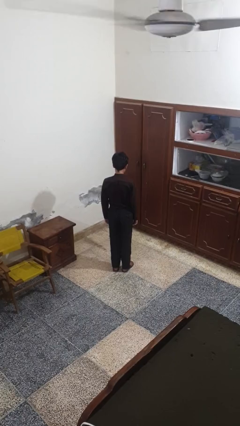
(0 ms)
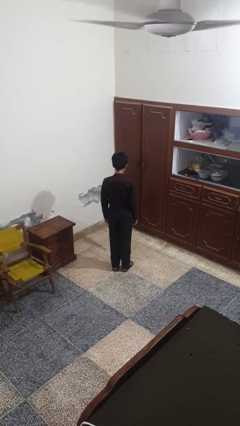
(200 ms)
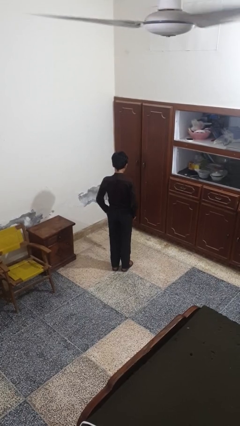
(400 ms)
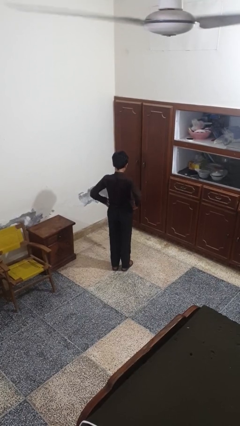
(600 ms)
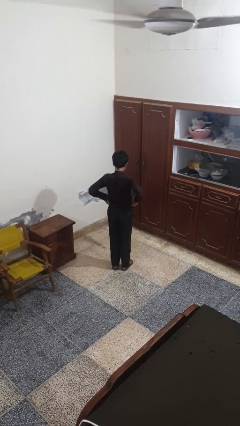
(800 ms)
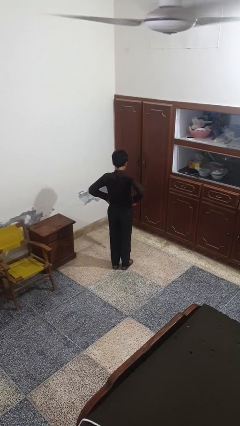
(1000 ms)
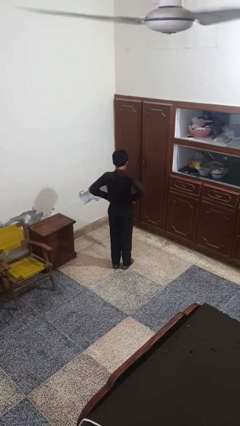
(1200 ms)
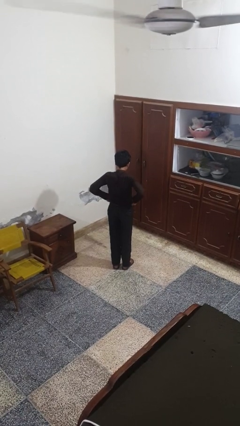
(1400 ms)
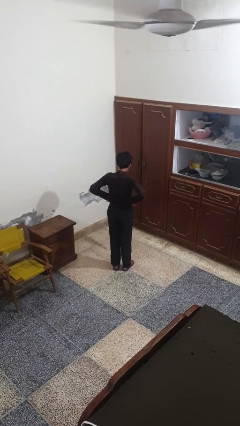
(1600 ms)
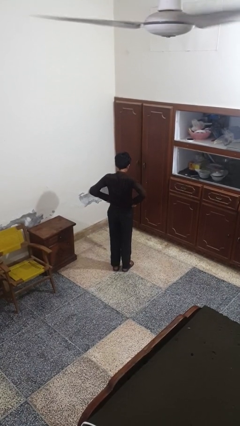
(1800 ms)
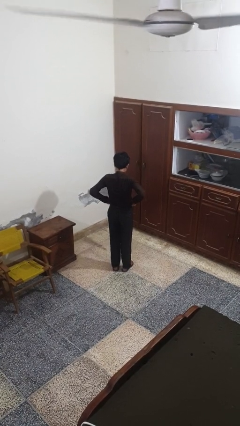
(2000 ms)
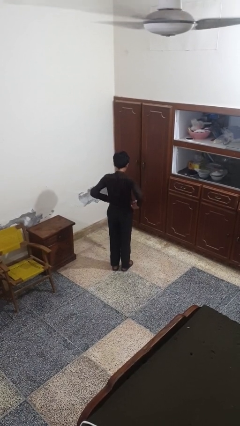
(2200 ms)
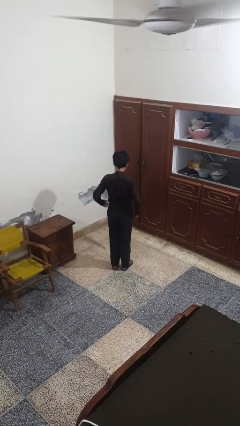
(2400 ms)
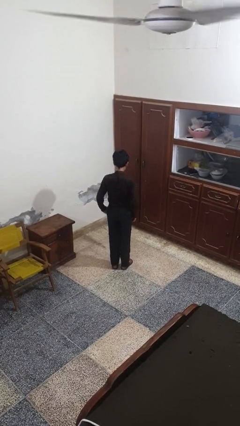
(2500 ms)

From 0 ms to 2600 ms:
person hikes up pants

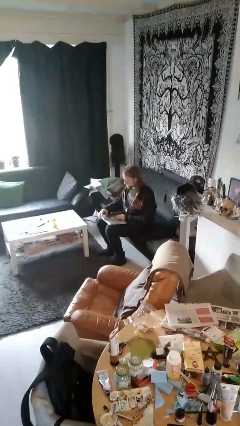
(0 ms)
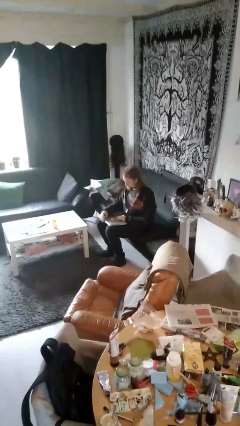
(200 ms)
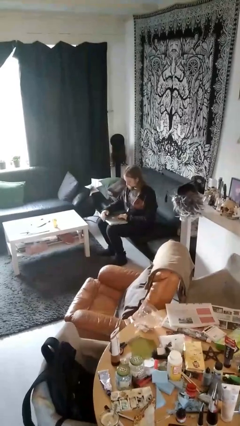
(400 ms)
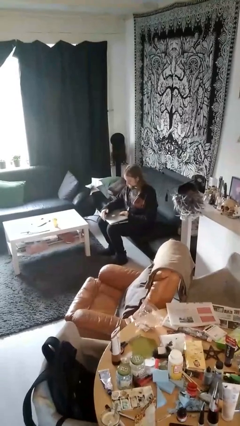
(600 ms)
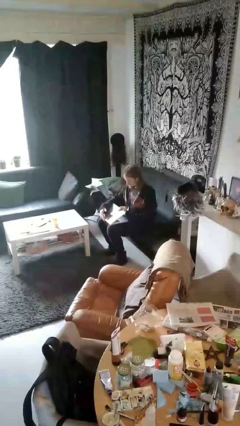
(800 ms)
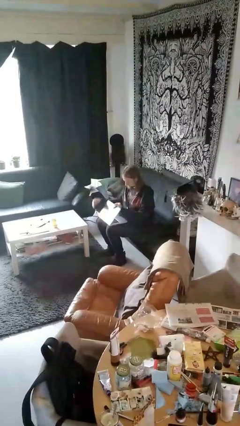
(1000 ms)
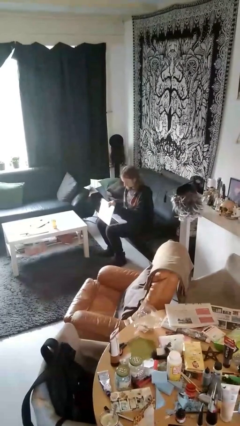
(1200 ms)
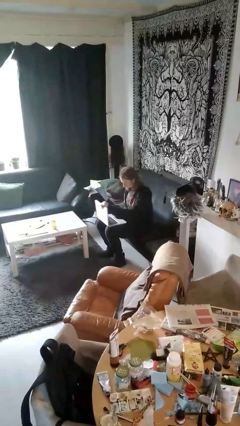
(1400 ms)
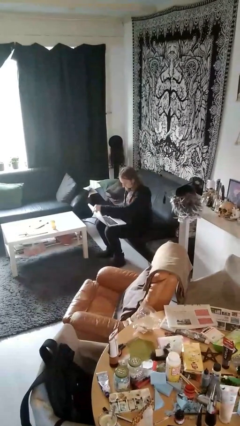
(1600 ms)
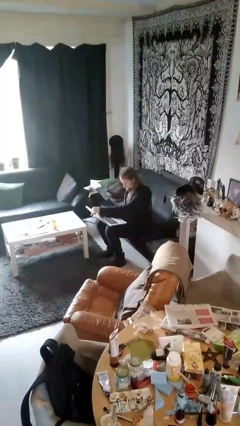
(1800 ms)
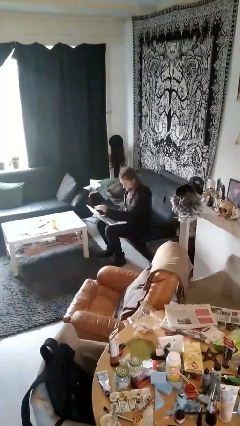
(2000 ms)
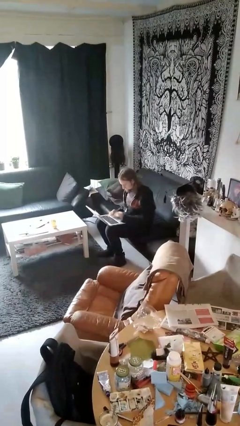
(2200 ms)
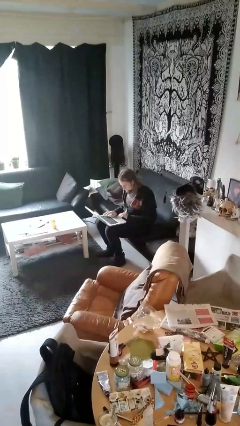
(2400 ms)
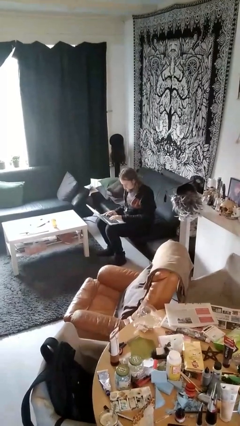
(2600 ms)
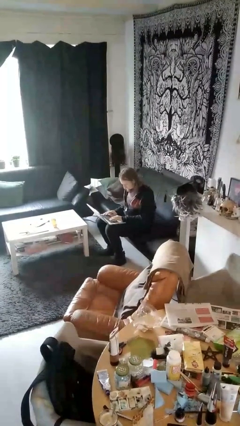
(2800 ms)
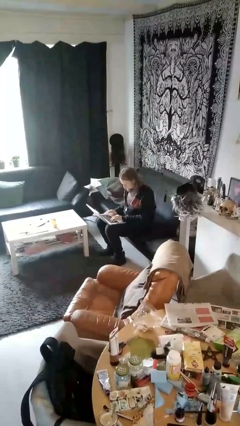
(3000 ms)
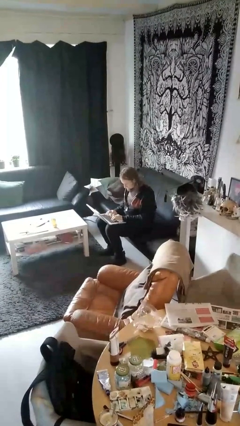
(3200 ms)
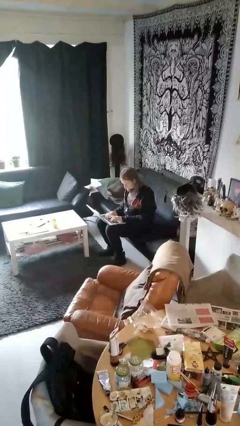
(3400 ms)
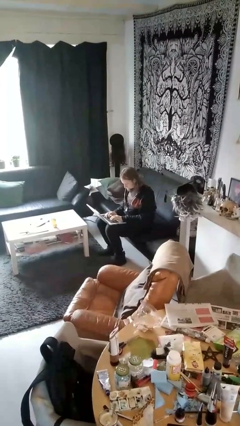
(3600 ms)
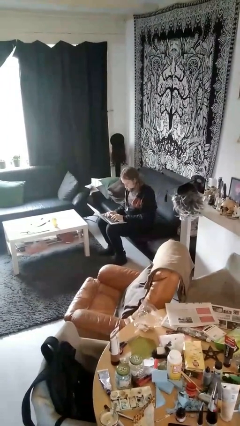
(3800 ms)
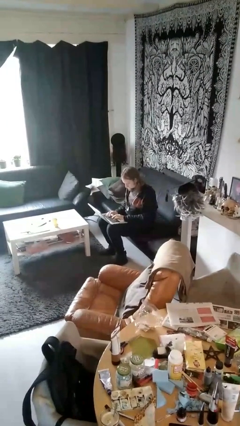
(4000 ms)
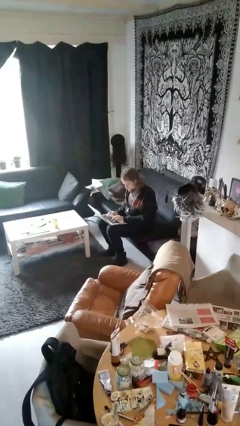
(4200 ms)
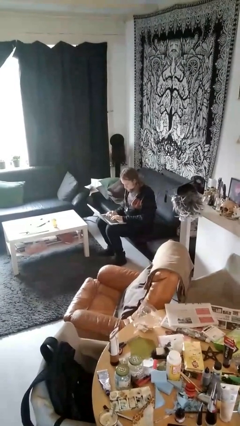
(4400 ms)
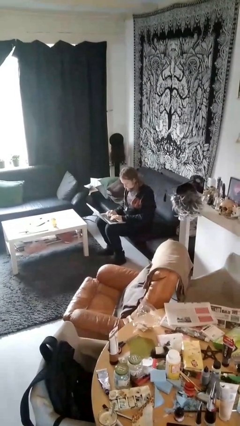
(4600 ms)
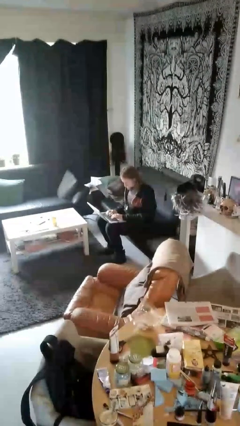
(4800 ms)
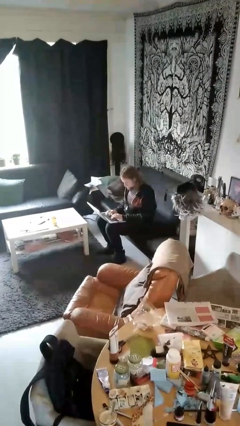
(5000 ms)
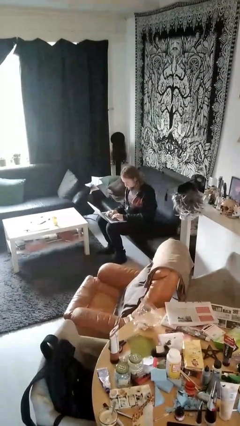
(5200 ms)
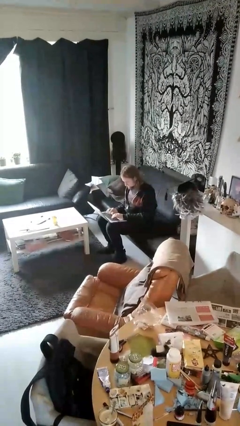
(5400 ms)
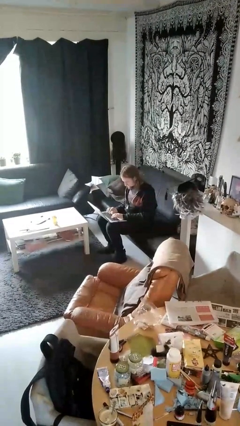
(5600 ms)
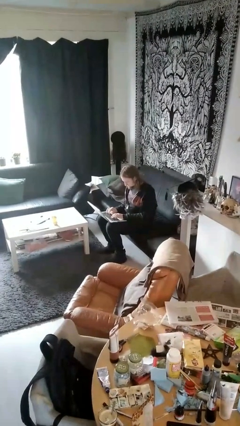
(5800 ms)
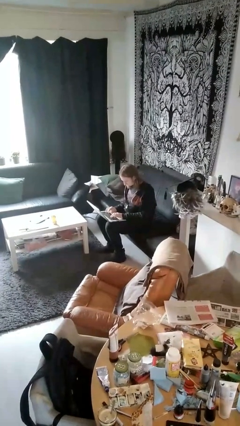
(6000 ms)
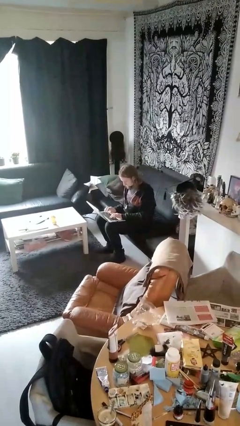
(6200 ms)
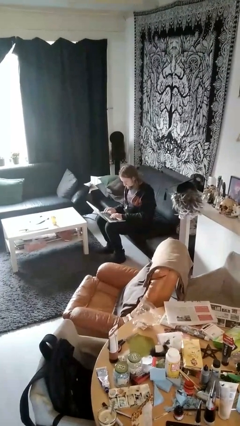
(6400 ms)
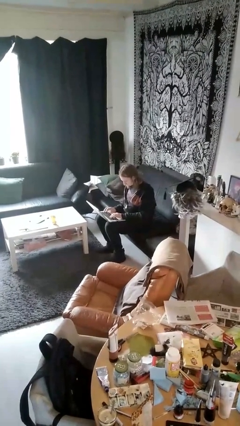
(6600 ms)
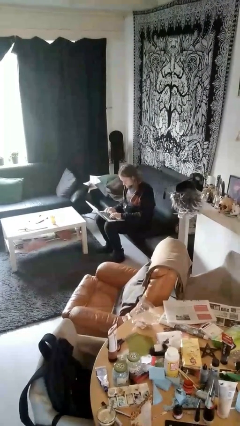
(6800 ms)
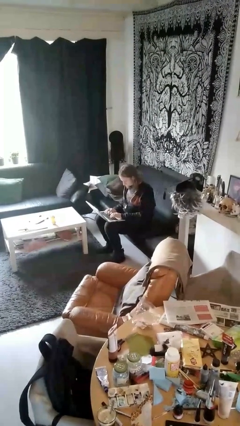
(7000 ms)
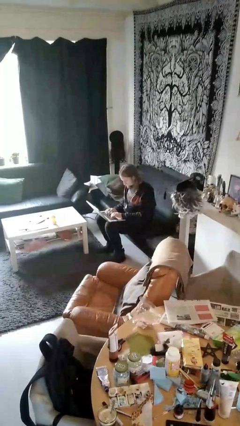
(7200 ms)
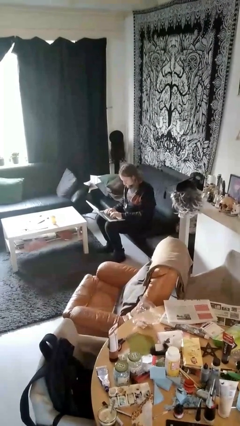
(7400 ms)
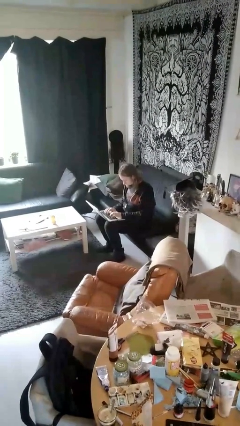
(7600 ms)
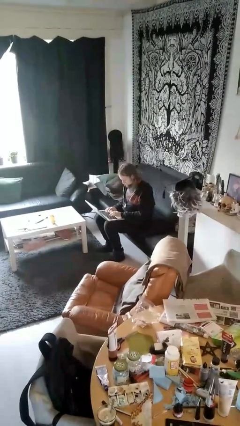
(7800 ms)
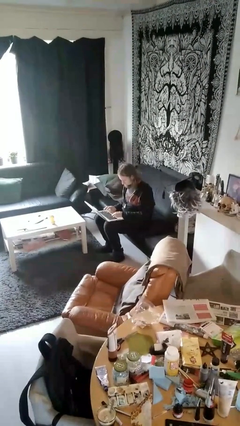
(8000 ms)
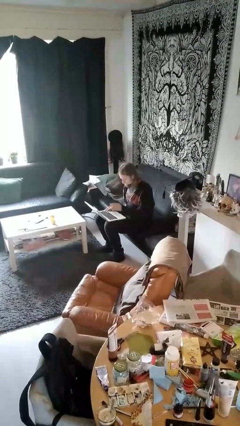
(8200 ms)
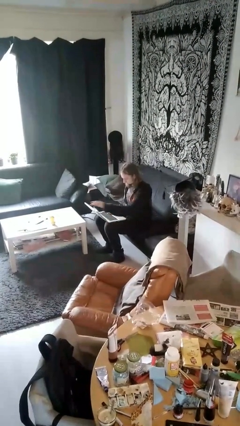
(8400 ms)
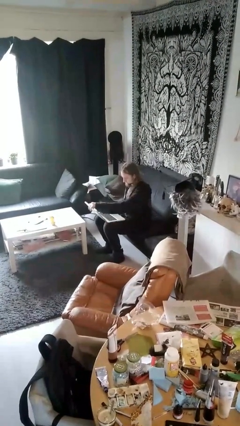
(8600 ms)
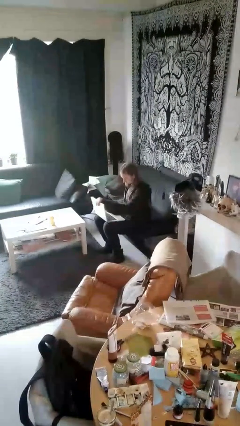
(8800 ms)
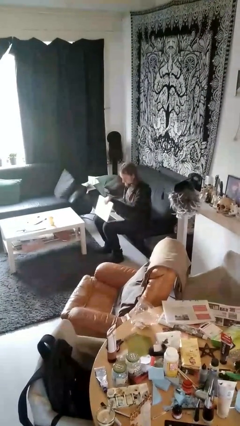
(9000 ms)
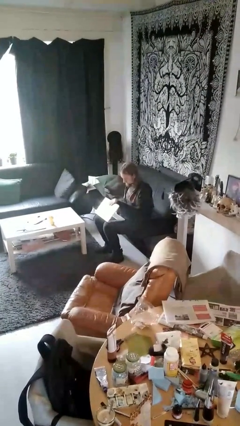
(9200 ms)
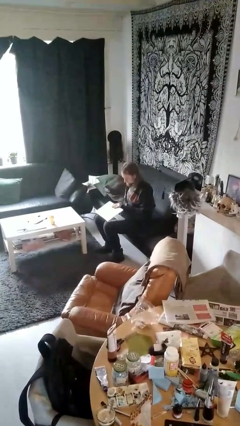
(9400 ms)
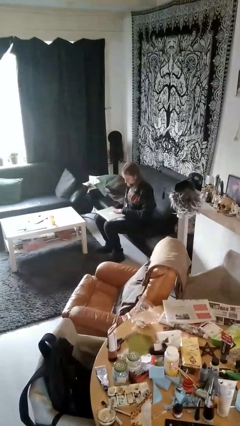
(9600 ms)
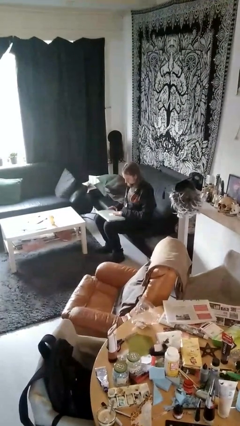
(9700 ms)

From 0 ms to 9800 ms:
person interacts with laptop

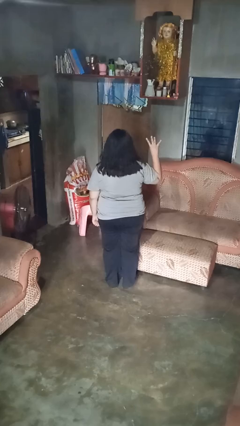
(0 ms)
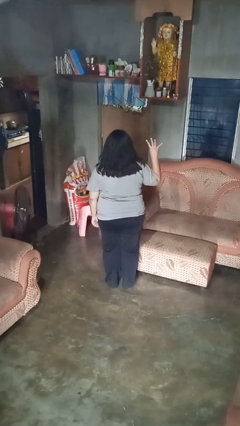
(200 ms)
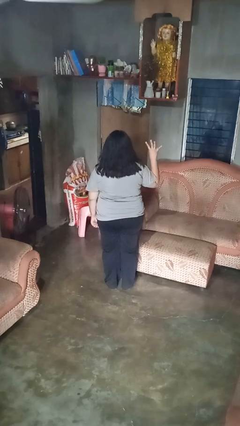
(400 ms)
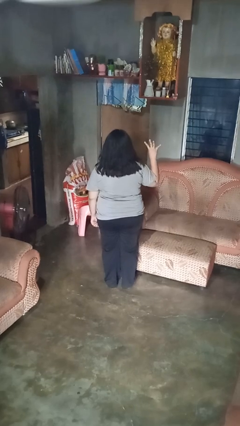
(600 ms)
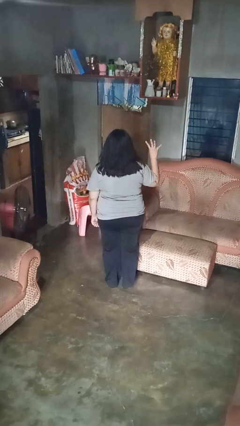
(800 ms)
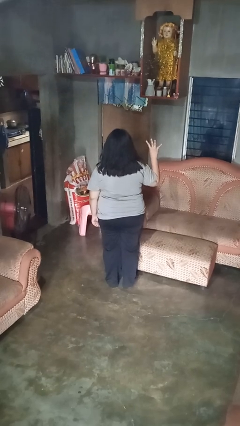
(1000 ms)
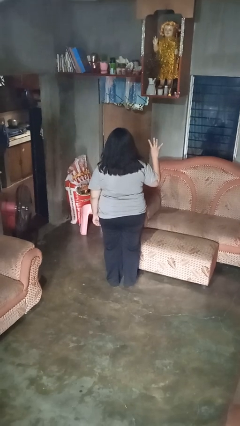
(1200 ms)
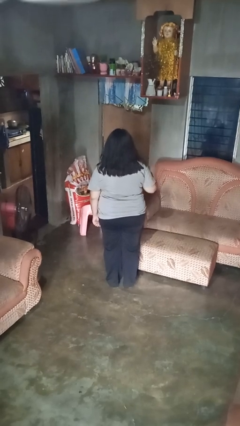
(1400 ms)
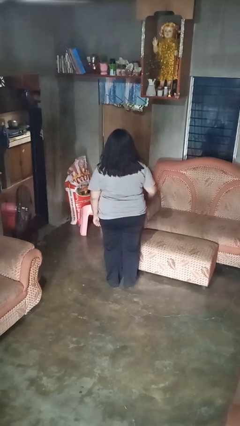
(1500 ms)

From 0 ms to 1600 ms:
person gestures number four

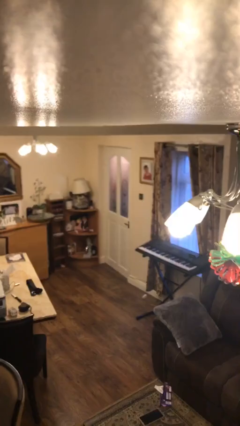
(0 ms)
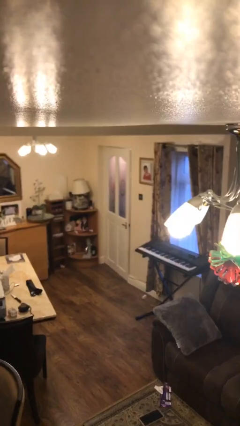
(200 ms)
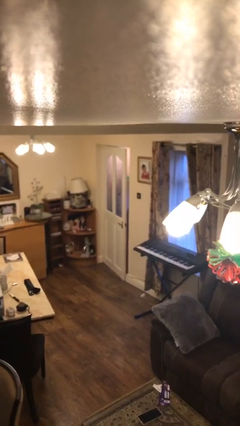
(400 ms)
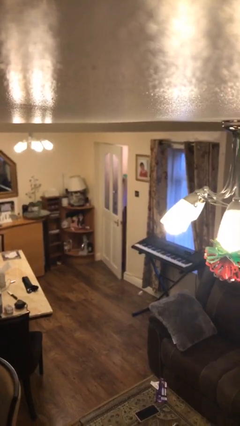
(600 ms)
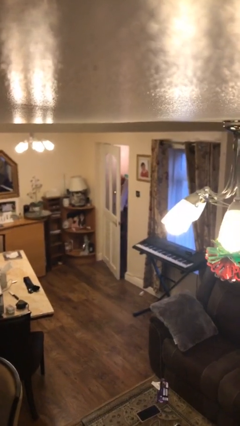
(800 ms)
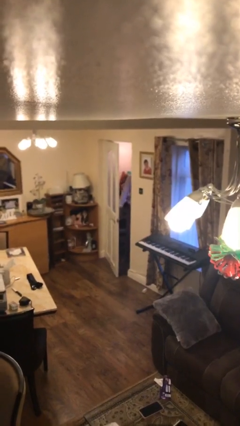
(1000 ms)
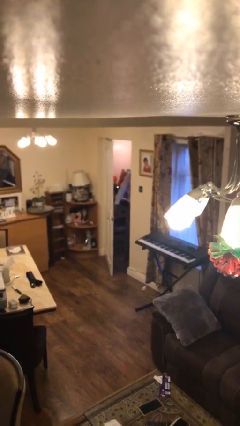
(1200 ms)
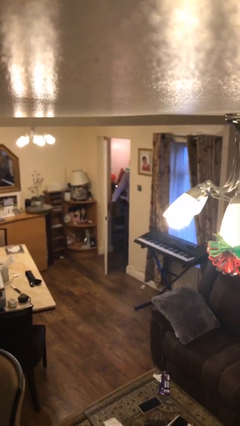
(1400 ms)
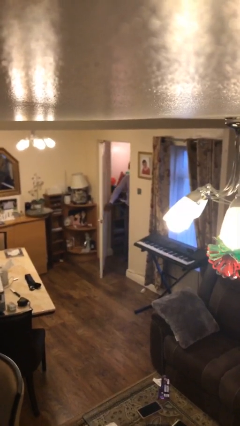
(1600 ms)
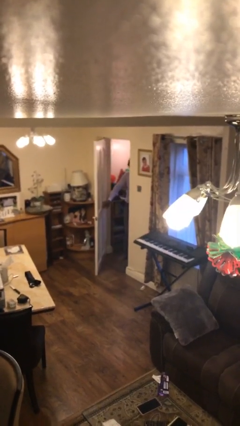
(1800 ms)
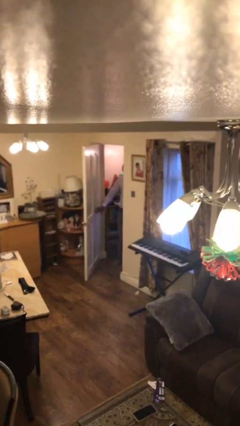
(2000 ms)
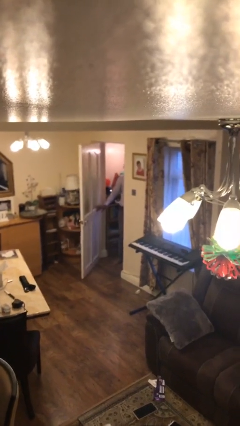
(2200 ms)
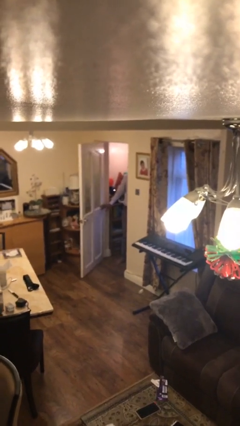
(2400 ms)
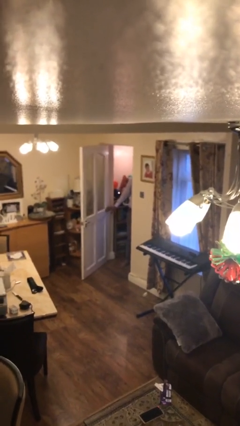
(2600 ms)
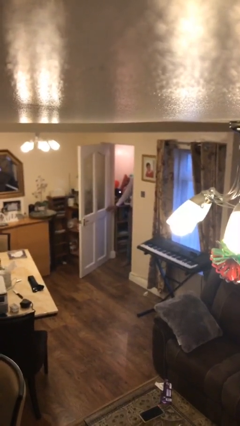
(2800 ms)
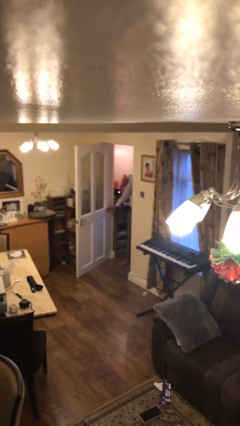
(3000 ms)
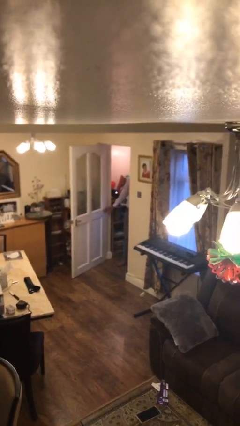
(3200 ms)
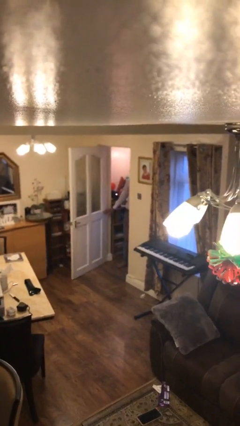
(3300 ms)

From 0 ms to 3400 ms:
person opens facility door

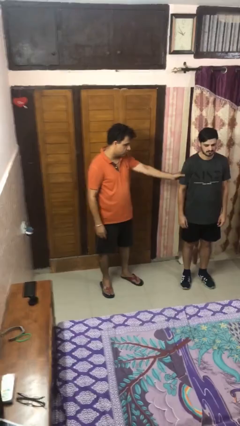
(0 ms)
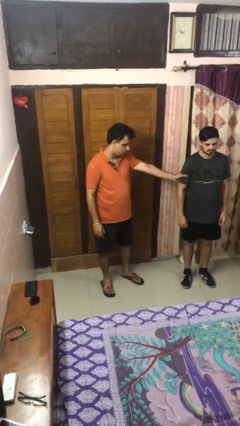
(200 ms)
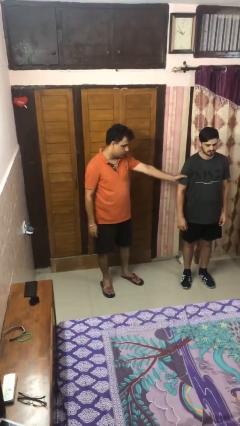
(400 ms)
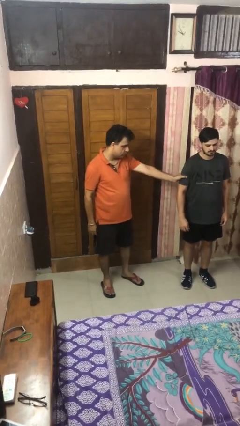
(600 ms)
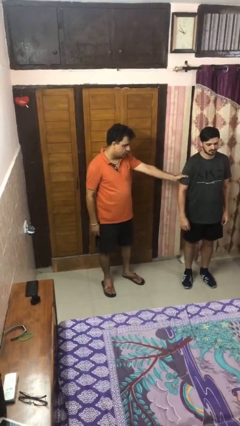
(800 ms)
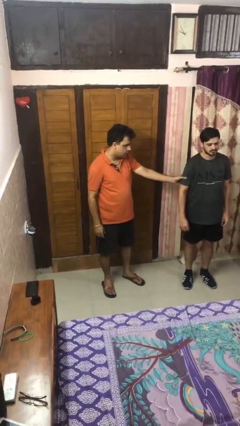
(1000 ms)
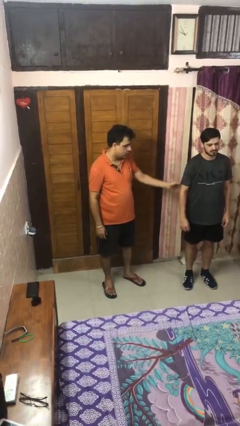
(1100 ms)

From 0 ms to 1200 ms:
person grabs person by bicep
